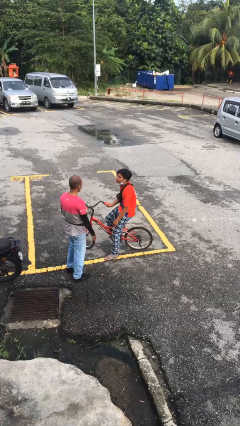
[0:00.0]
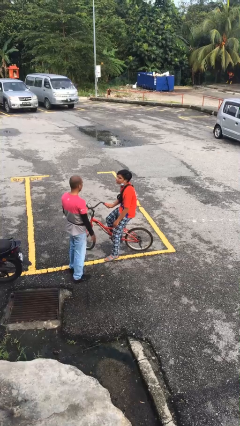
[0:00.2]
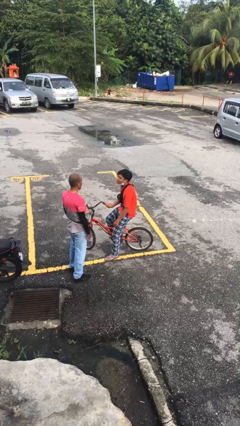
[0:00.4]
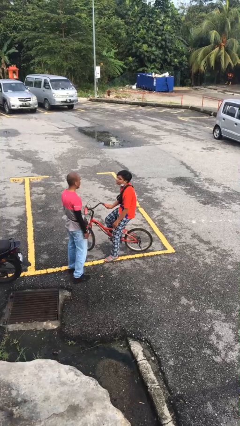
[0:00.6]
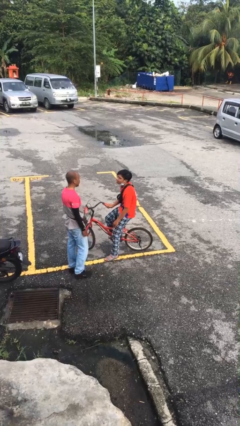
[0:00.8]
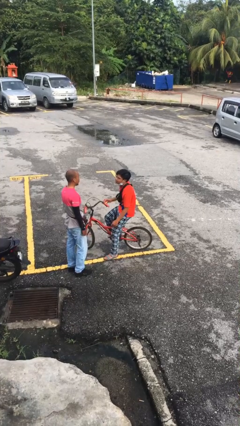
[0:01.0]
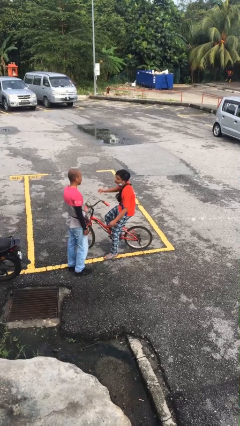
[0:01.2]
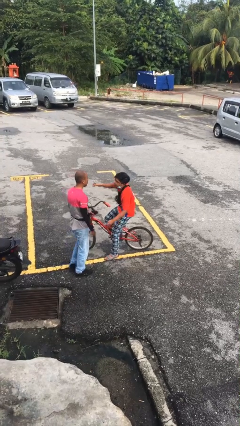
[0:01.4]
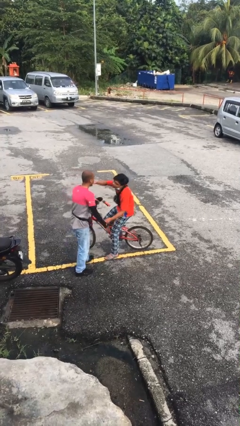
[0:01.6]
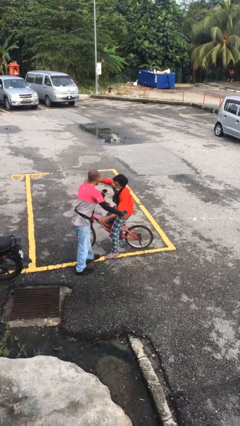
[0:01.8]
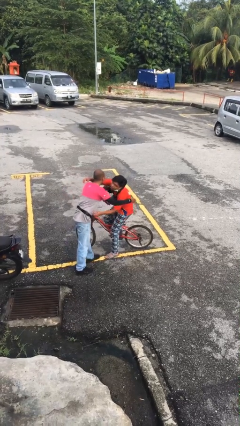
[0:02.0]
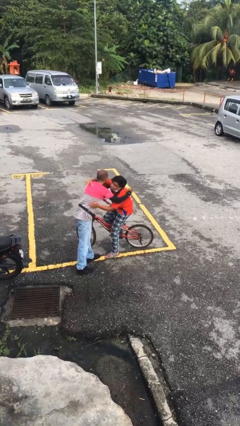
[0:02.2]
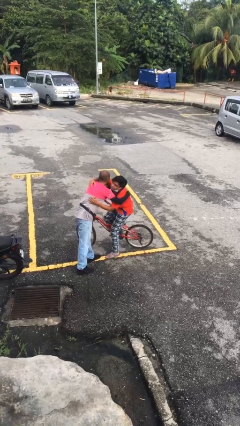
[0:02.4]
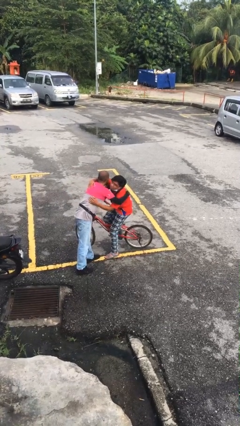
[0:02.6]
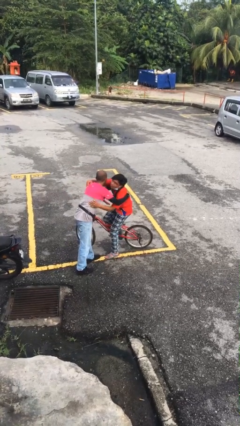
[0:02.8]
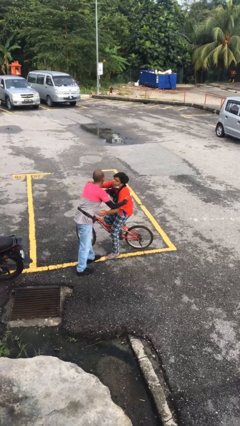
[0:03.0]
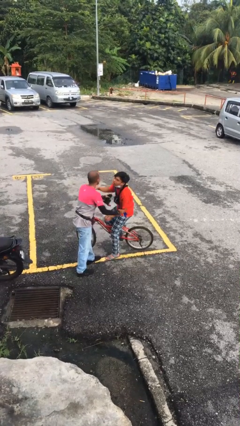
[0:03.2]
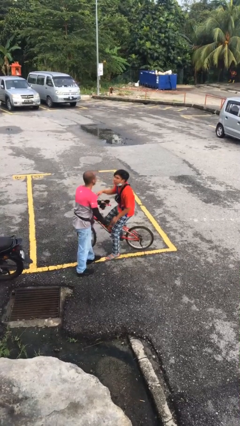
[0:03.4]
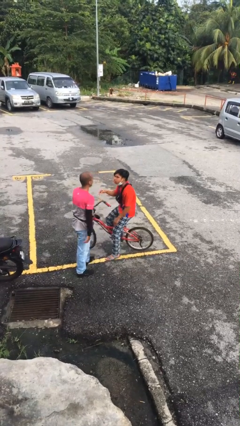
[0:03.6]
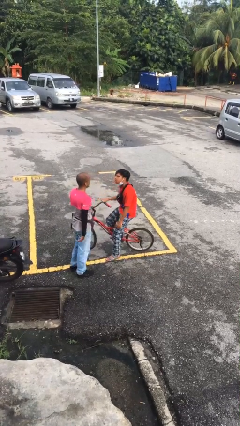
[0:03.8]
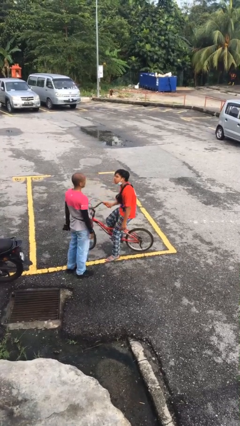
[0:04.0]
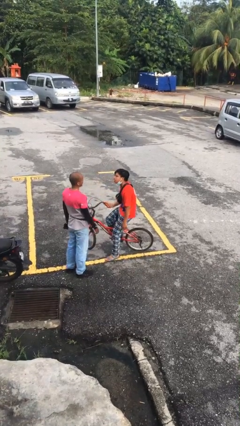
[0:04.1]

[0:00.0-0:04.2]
person embraces person

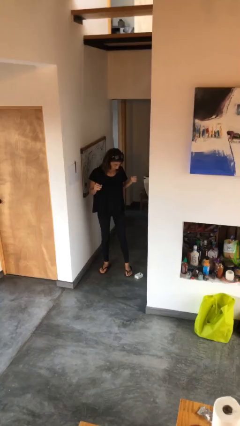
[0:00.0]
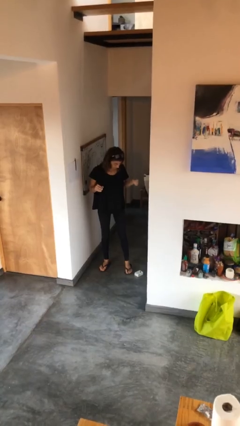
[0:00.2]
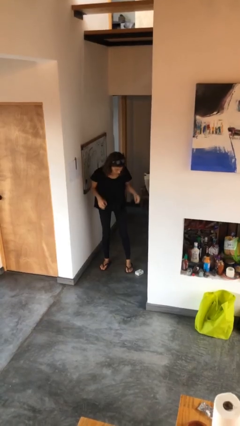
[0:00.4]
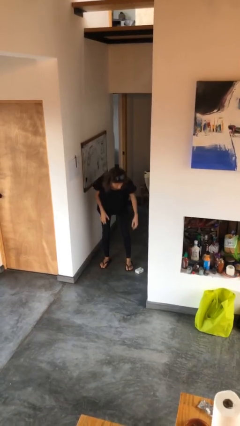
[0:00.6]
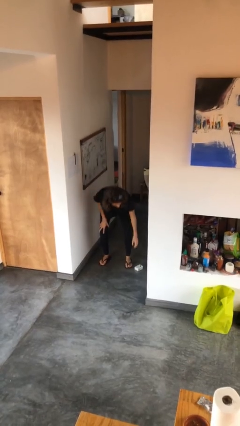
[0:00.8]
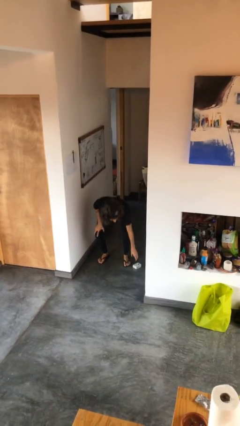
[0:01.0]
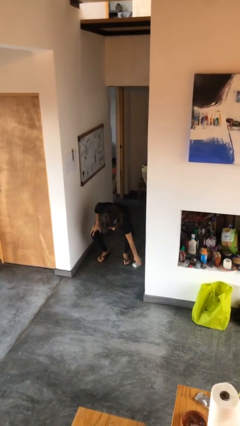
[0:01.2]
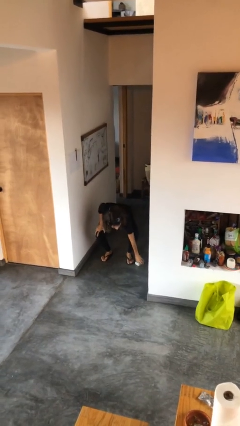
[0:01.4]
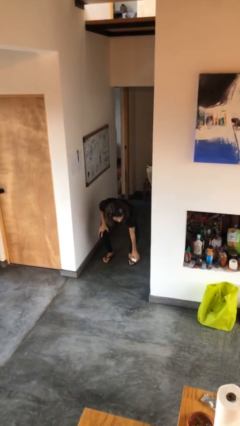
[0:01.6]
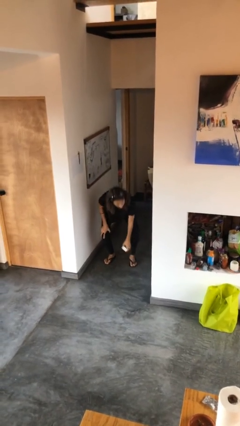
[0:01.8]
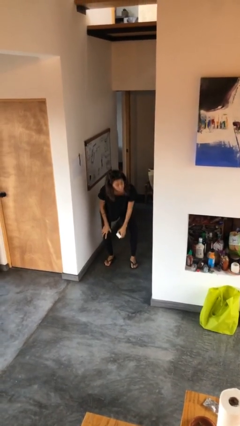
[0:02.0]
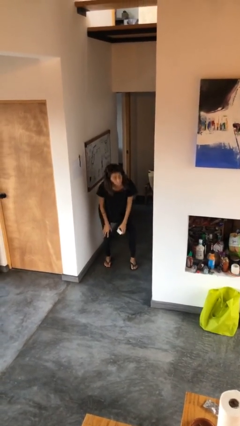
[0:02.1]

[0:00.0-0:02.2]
person picks up object from floor

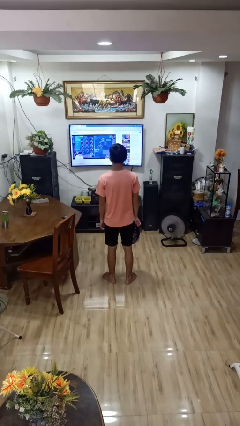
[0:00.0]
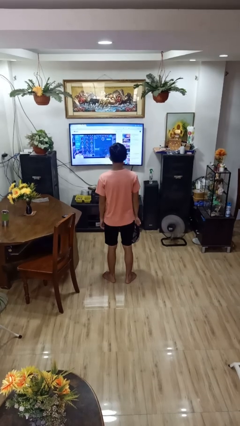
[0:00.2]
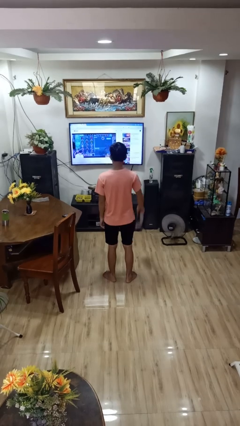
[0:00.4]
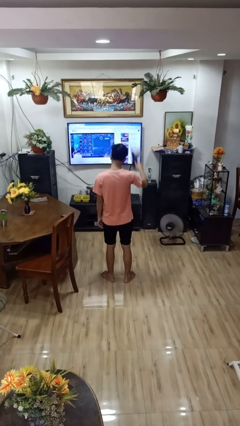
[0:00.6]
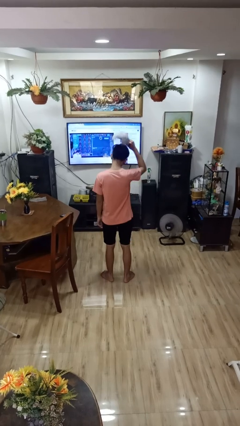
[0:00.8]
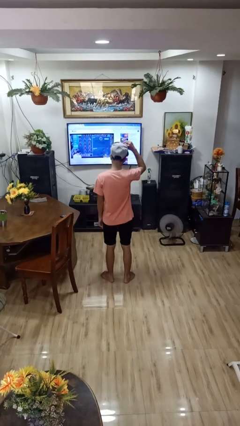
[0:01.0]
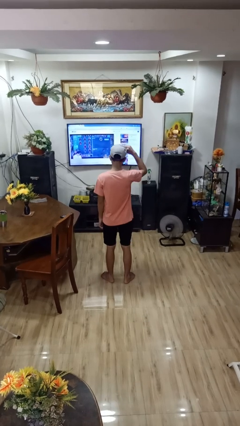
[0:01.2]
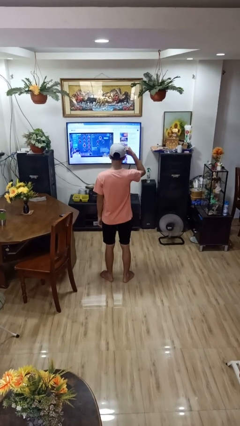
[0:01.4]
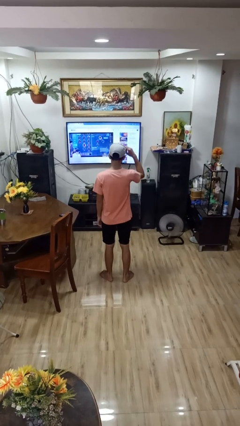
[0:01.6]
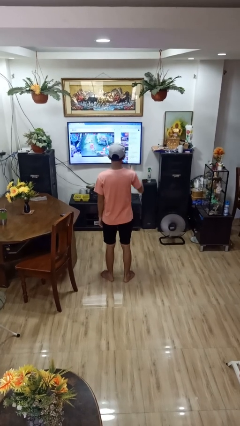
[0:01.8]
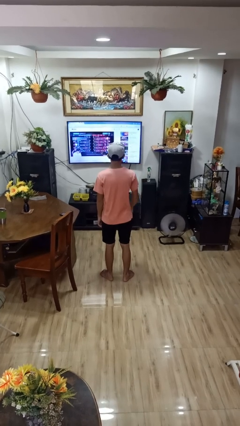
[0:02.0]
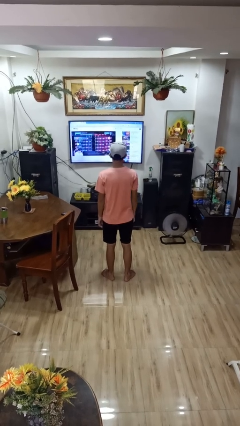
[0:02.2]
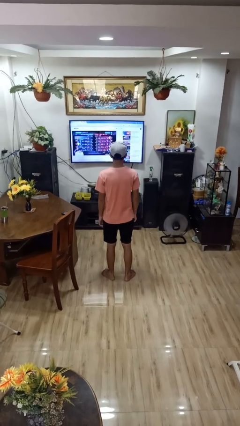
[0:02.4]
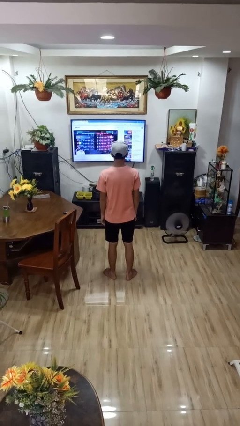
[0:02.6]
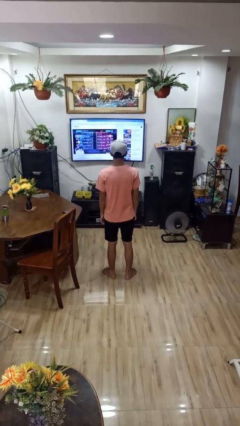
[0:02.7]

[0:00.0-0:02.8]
person puts on hat

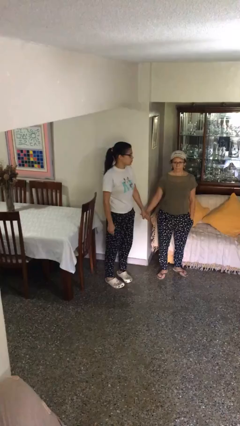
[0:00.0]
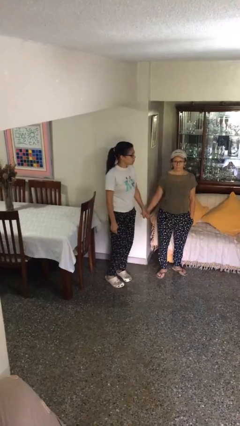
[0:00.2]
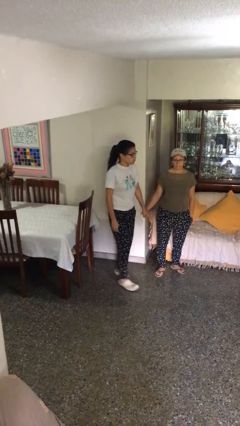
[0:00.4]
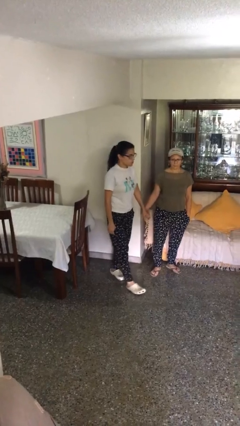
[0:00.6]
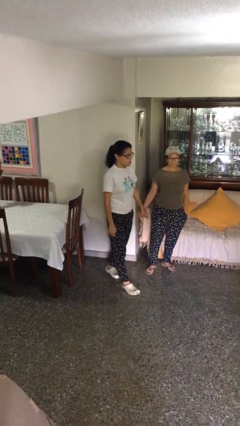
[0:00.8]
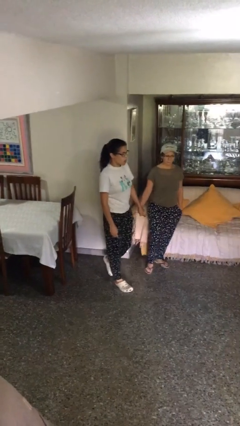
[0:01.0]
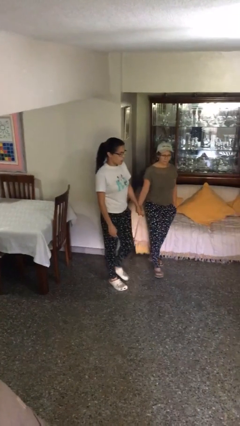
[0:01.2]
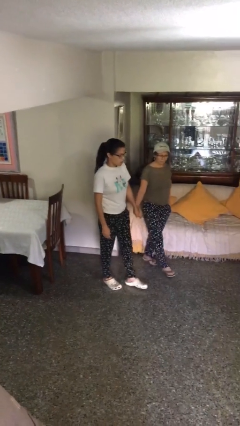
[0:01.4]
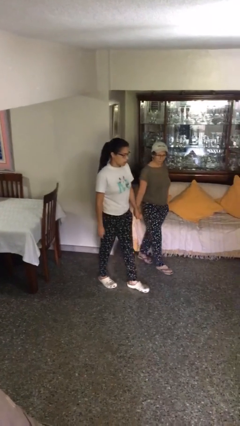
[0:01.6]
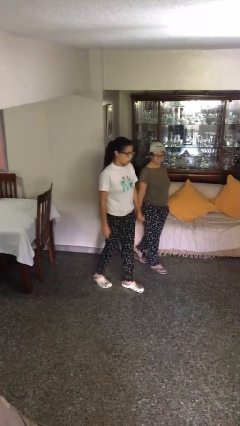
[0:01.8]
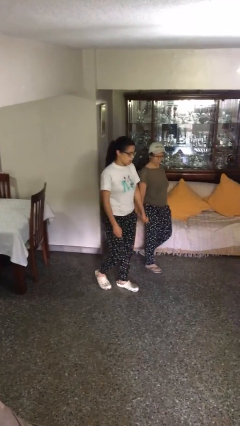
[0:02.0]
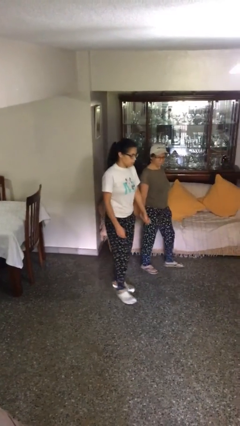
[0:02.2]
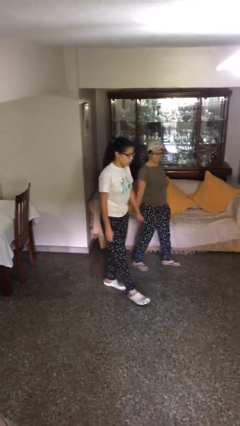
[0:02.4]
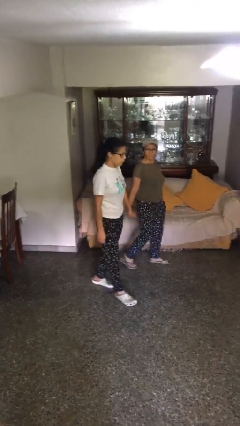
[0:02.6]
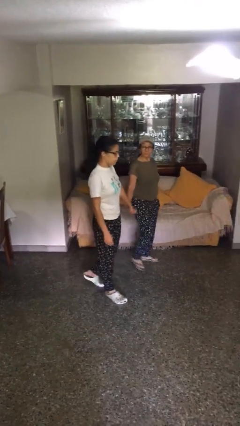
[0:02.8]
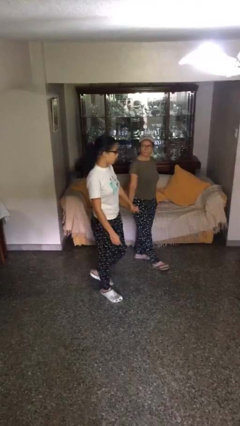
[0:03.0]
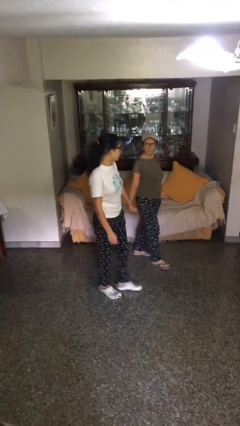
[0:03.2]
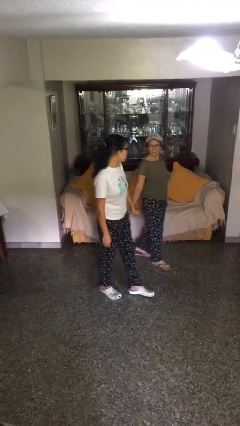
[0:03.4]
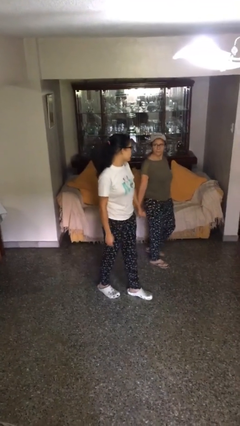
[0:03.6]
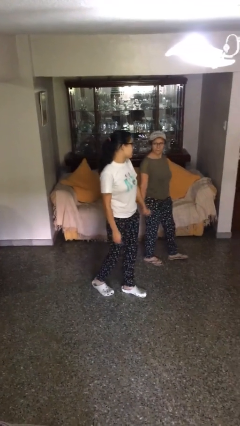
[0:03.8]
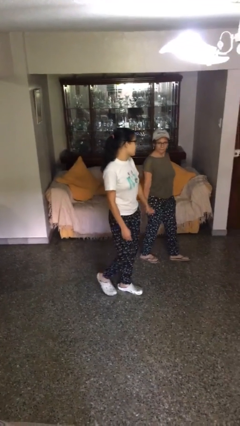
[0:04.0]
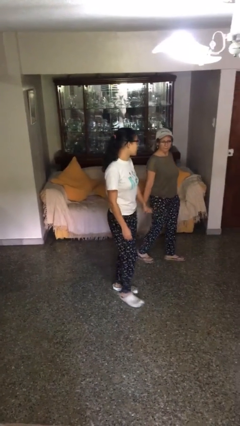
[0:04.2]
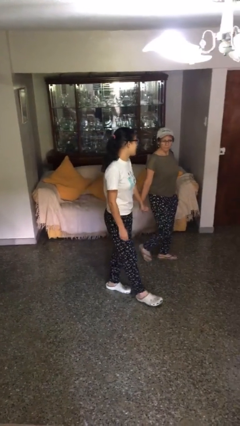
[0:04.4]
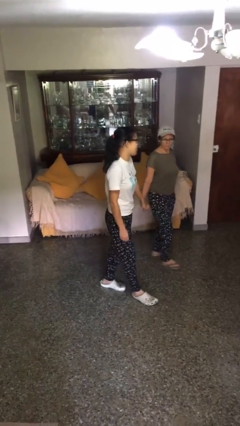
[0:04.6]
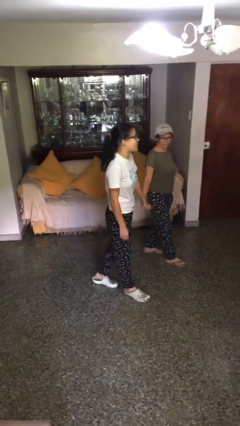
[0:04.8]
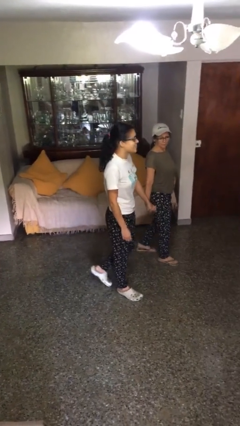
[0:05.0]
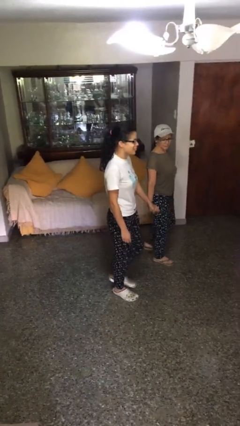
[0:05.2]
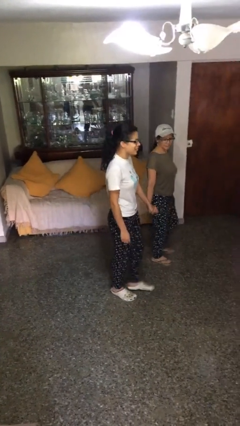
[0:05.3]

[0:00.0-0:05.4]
person holds hand

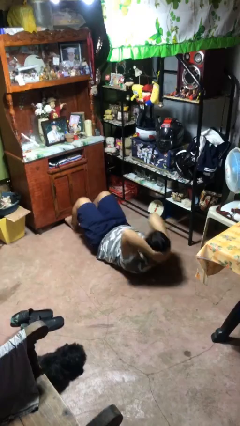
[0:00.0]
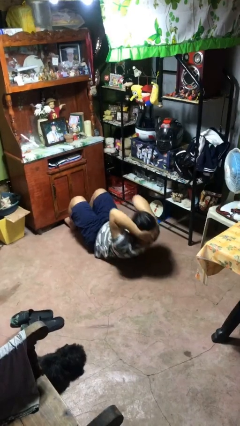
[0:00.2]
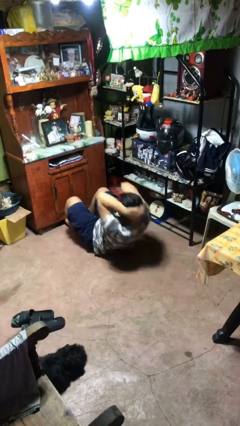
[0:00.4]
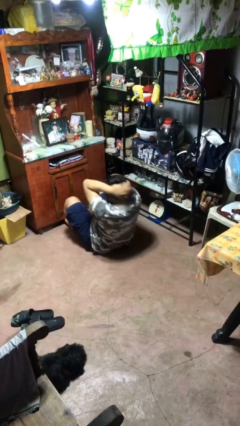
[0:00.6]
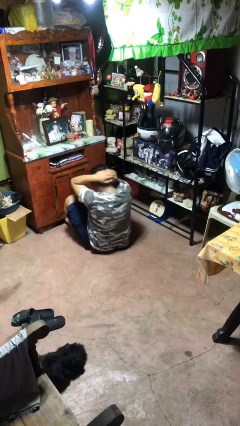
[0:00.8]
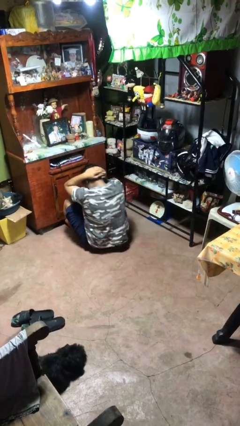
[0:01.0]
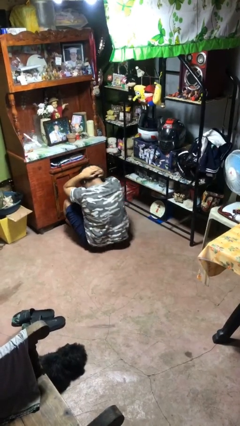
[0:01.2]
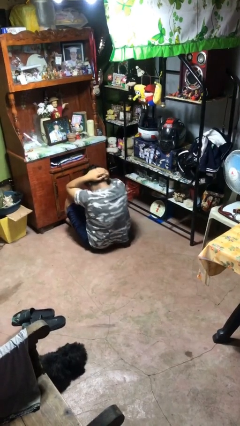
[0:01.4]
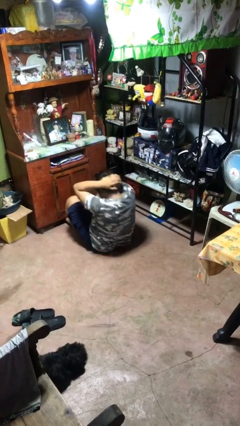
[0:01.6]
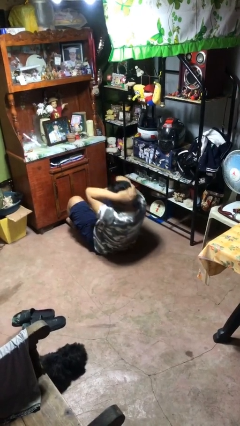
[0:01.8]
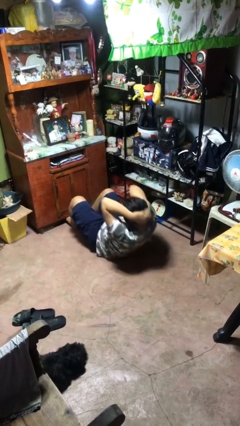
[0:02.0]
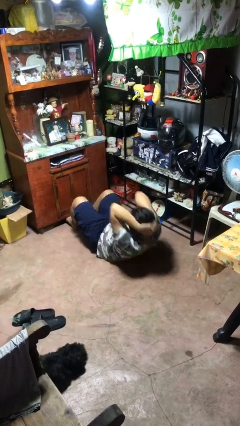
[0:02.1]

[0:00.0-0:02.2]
person exercises with situp

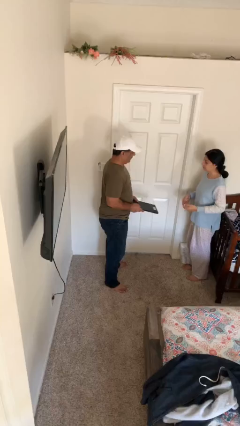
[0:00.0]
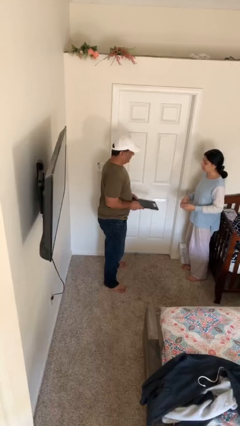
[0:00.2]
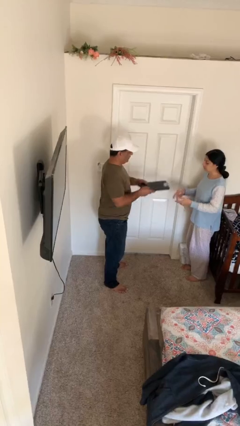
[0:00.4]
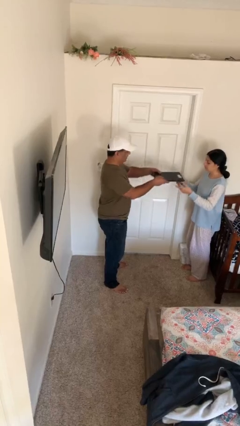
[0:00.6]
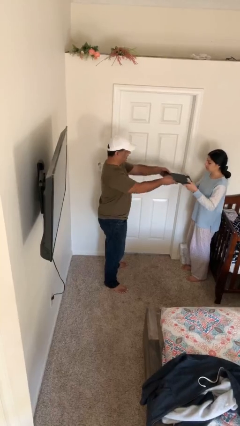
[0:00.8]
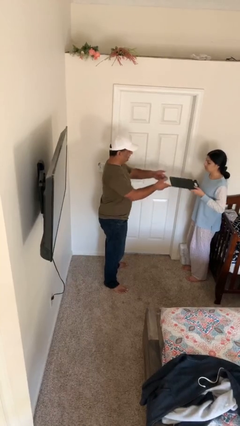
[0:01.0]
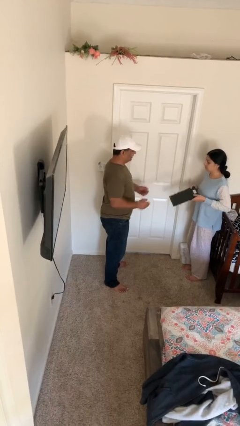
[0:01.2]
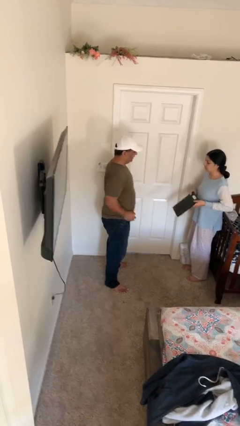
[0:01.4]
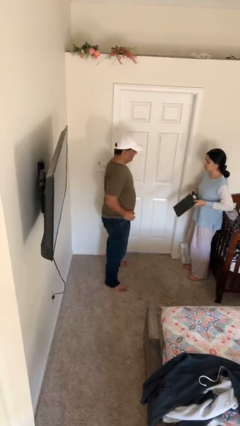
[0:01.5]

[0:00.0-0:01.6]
person transfers object to person
